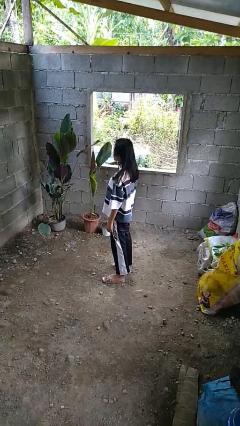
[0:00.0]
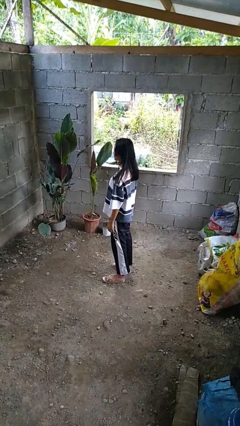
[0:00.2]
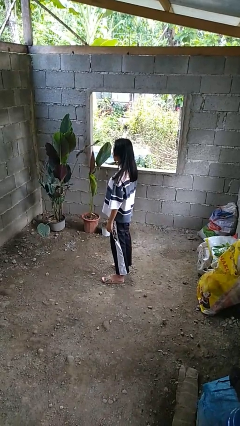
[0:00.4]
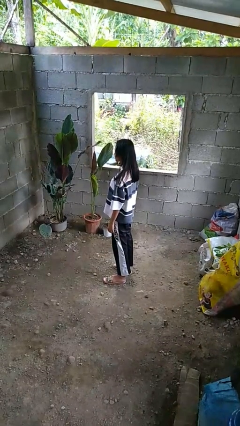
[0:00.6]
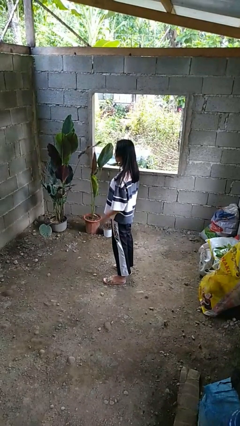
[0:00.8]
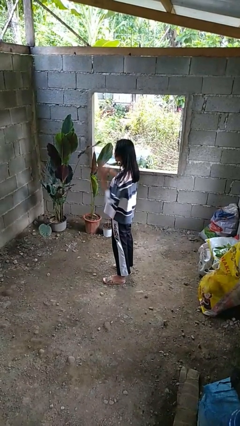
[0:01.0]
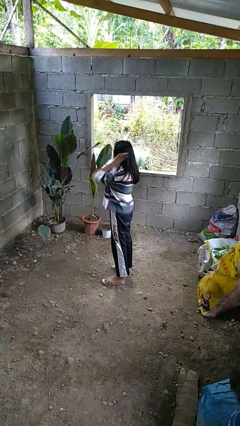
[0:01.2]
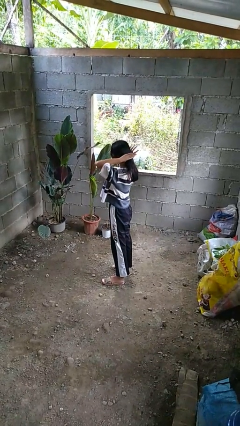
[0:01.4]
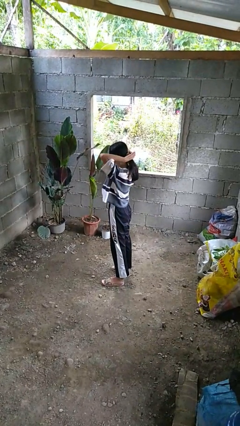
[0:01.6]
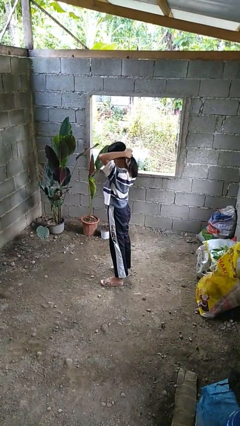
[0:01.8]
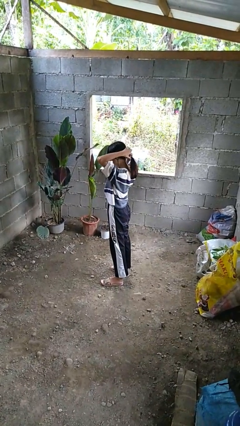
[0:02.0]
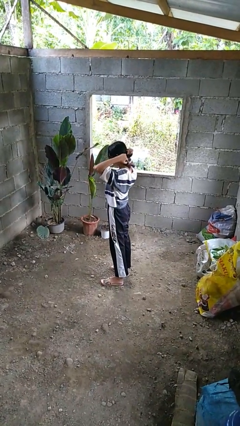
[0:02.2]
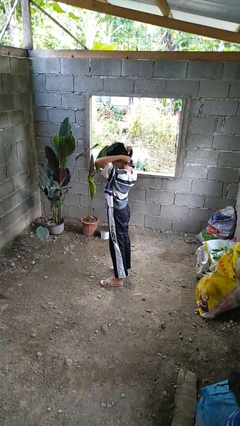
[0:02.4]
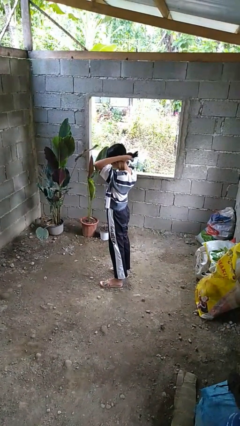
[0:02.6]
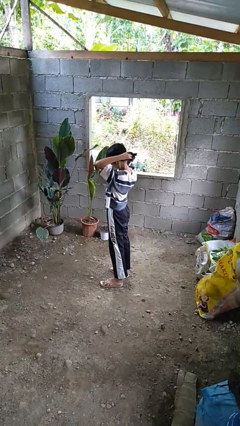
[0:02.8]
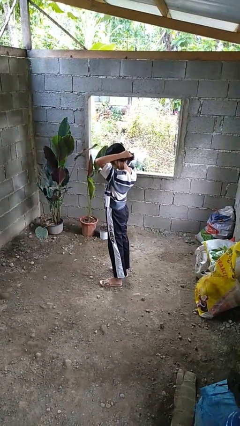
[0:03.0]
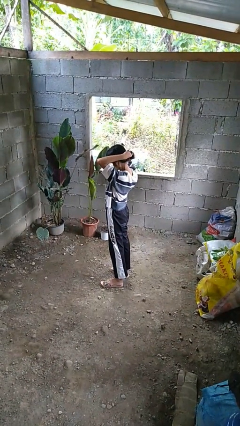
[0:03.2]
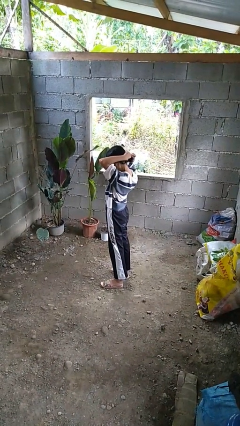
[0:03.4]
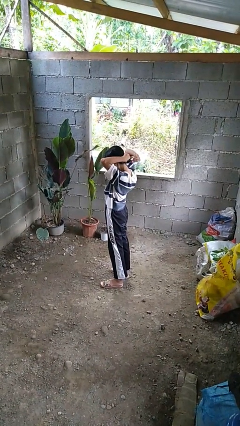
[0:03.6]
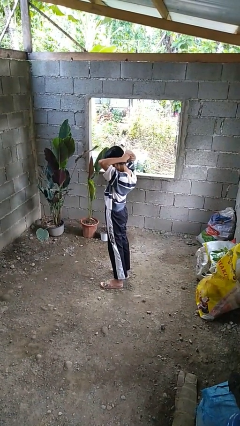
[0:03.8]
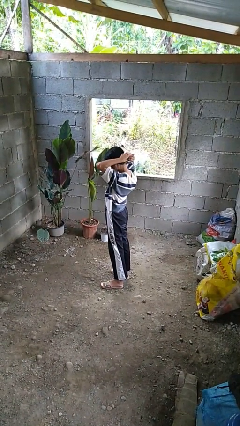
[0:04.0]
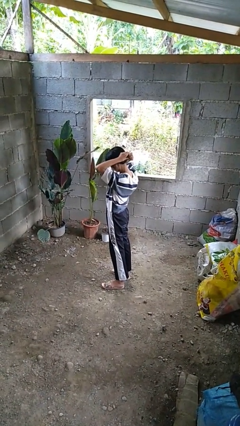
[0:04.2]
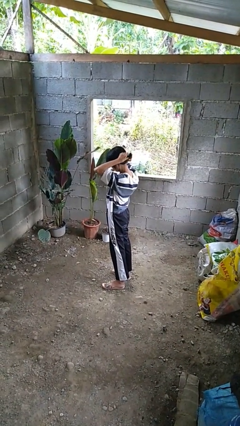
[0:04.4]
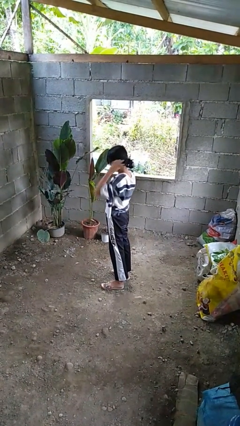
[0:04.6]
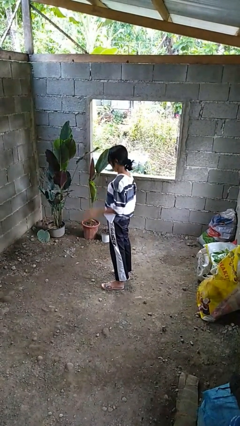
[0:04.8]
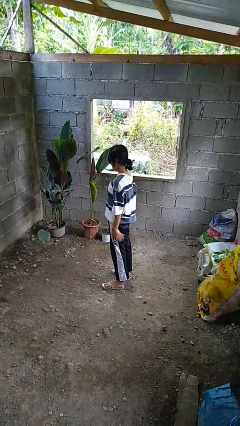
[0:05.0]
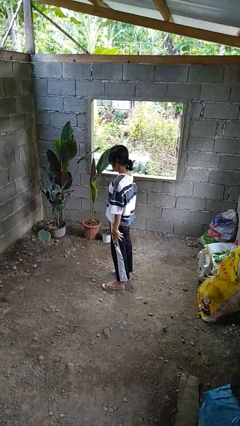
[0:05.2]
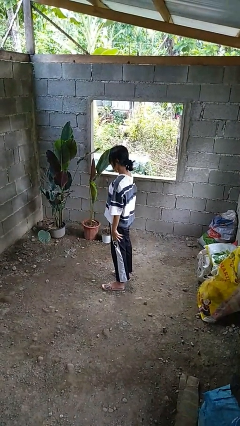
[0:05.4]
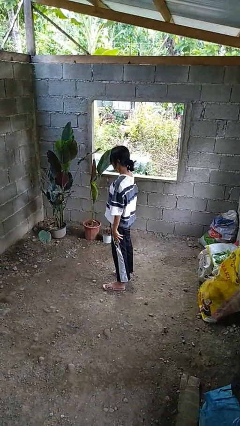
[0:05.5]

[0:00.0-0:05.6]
person puts hair in ponytail

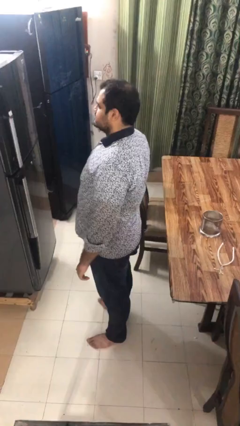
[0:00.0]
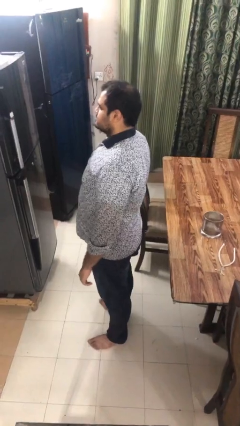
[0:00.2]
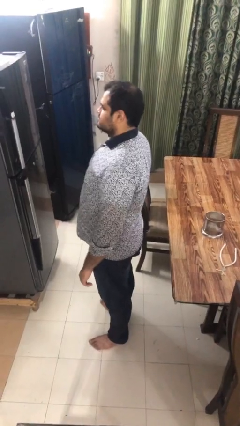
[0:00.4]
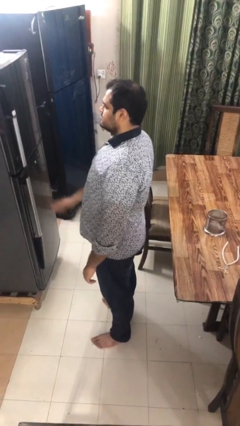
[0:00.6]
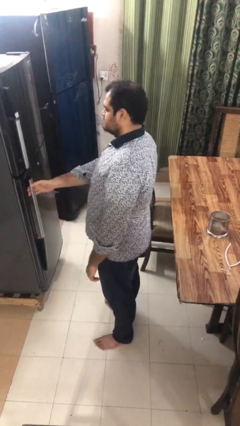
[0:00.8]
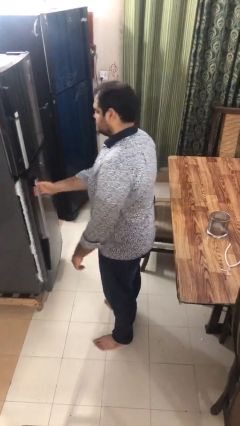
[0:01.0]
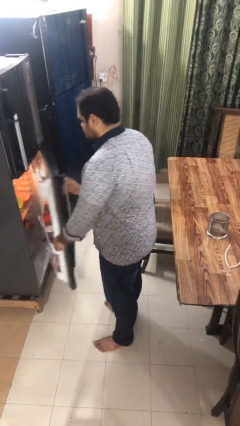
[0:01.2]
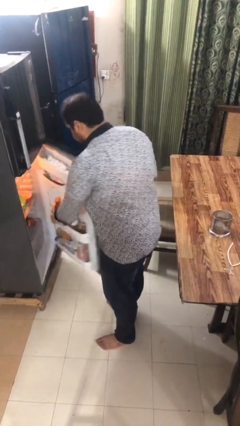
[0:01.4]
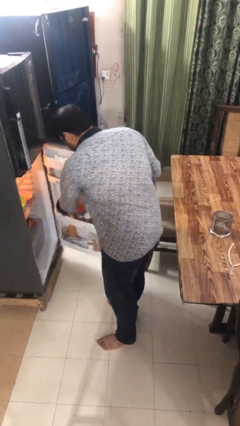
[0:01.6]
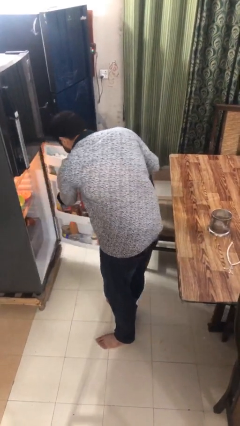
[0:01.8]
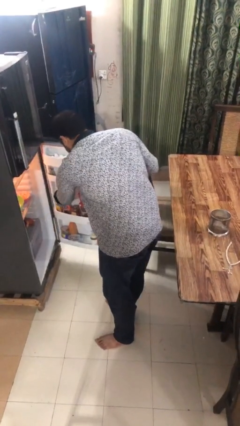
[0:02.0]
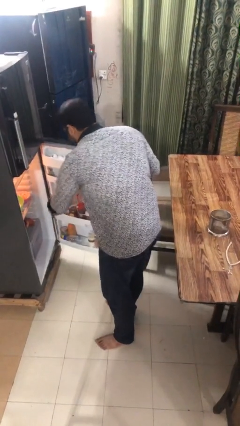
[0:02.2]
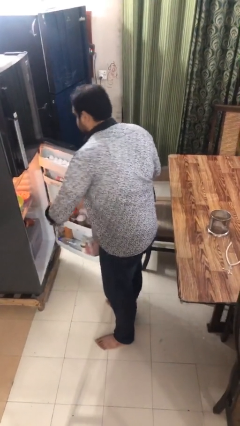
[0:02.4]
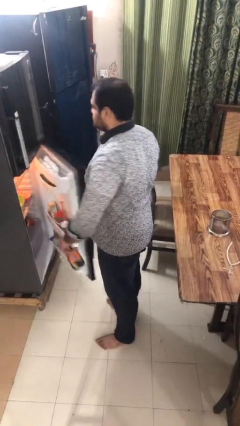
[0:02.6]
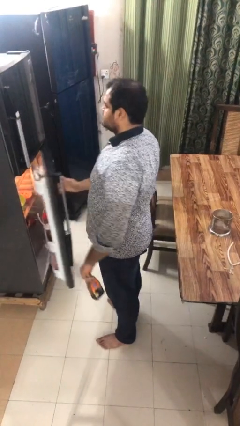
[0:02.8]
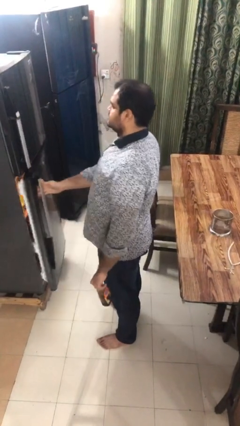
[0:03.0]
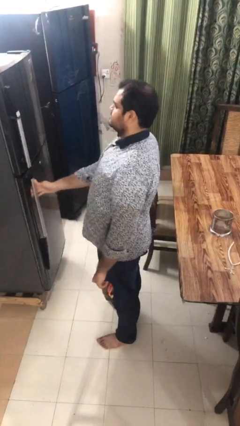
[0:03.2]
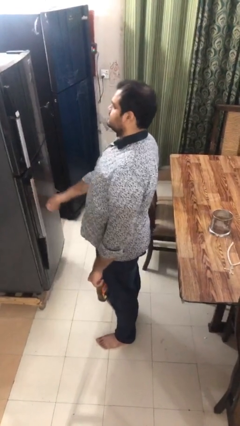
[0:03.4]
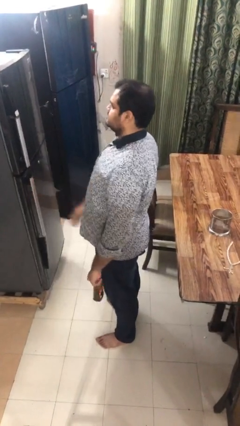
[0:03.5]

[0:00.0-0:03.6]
person takes object from refrigerator

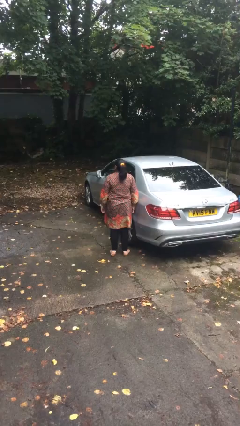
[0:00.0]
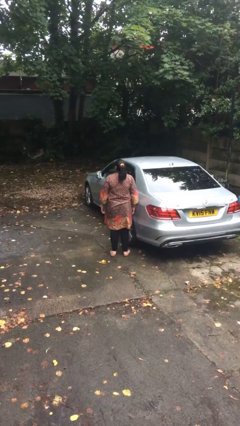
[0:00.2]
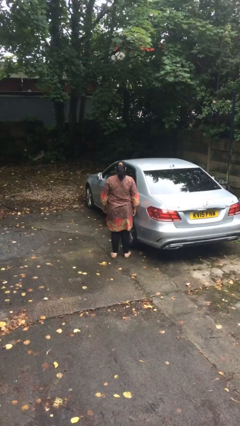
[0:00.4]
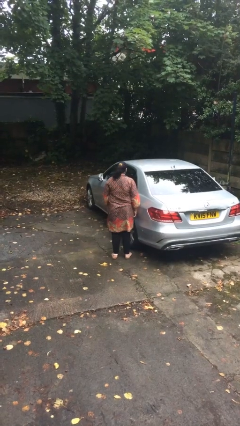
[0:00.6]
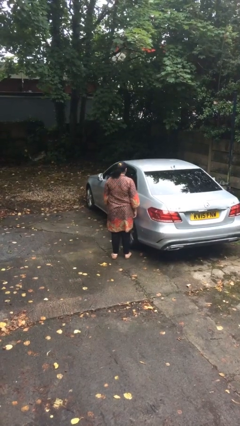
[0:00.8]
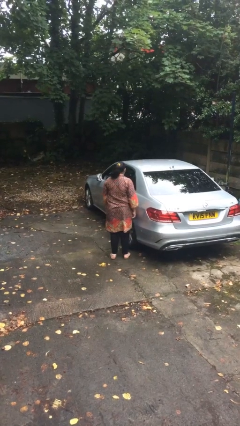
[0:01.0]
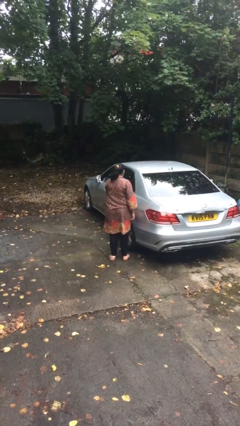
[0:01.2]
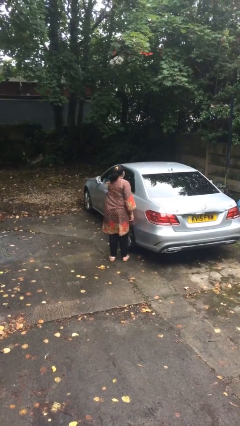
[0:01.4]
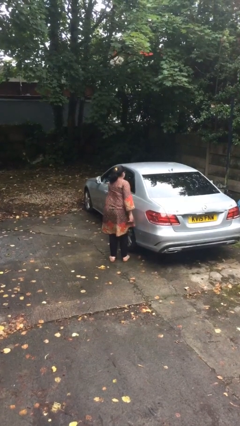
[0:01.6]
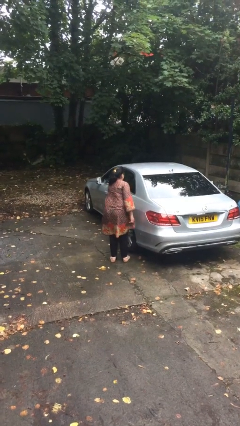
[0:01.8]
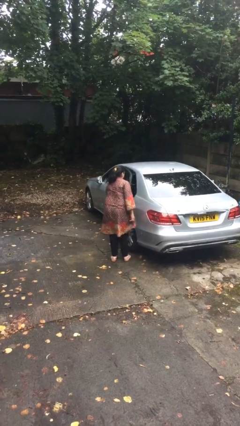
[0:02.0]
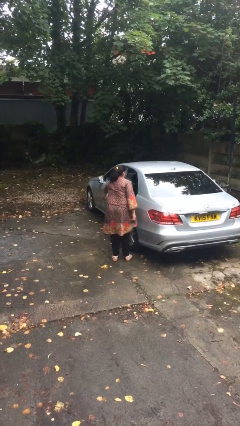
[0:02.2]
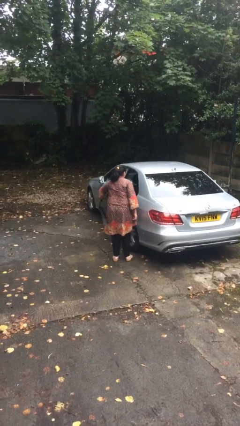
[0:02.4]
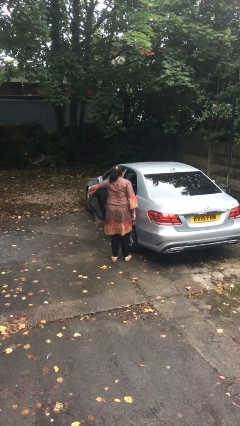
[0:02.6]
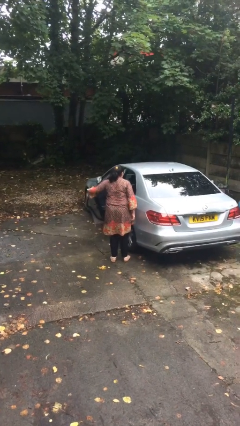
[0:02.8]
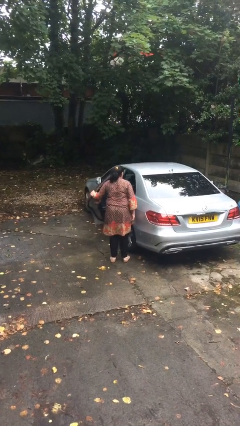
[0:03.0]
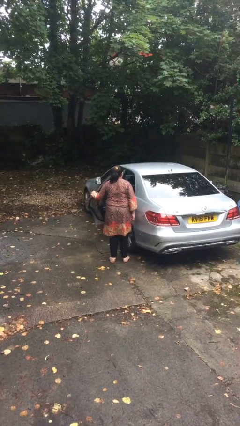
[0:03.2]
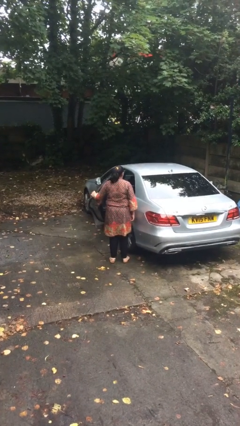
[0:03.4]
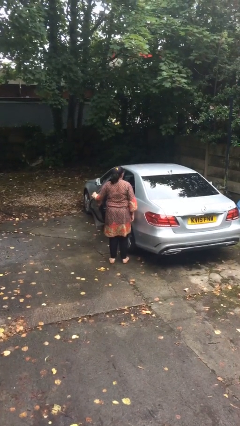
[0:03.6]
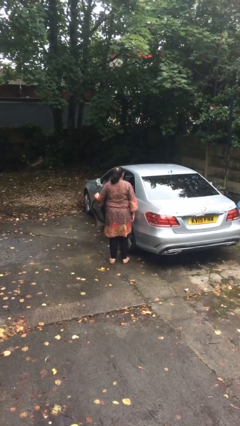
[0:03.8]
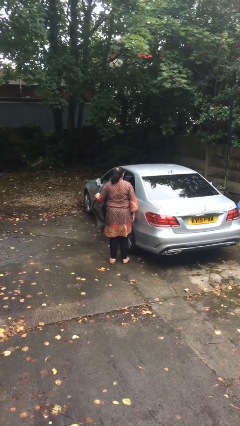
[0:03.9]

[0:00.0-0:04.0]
person opens car door

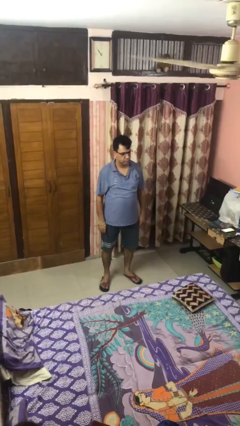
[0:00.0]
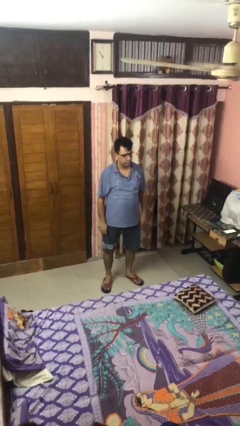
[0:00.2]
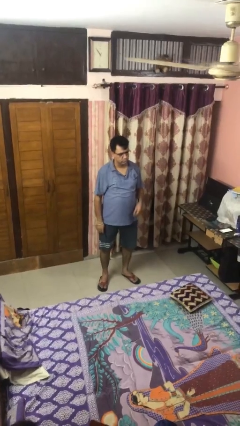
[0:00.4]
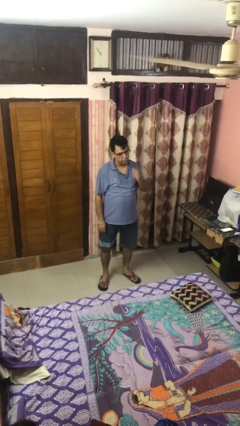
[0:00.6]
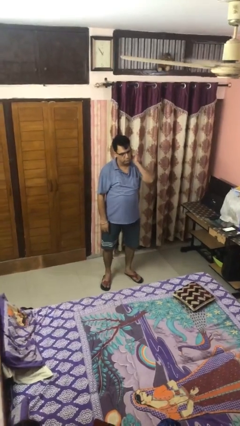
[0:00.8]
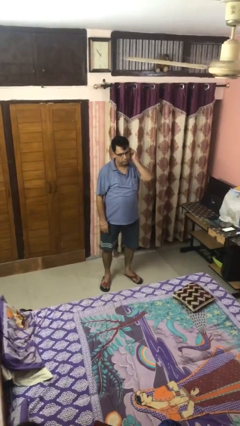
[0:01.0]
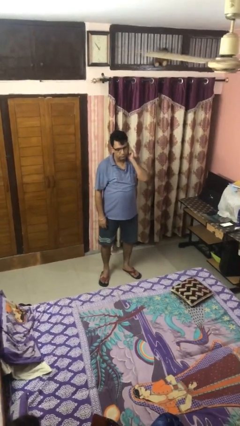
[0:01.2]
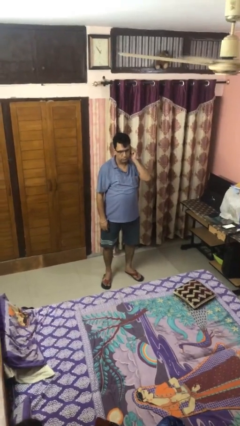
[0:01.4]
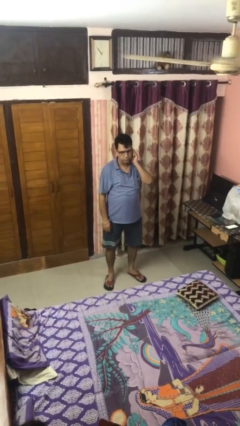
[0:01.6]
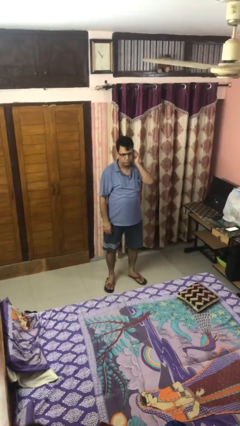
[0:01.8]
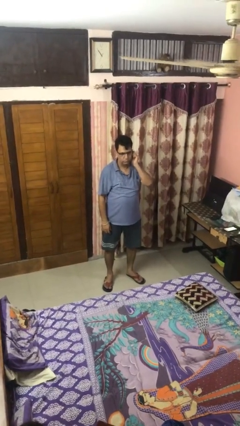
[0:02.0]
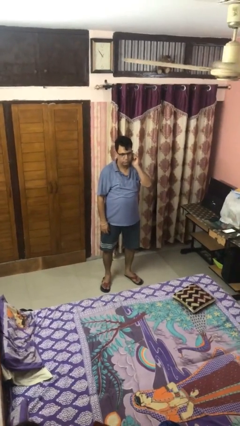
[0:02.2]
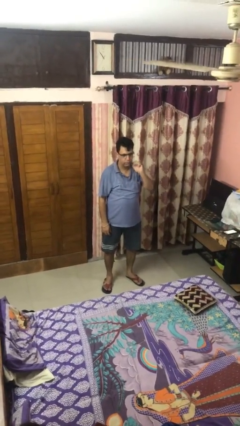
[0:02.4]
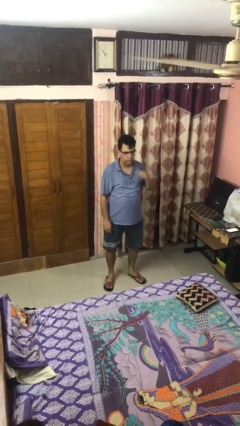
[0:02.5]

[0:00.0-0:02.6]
person touches earlobe

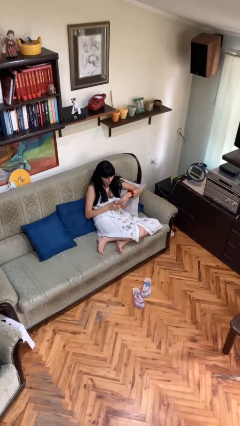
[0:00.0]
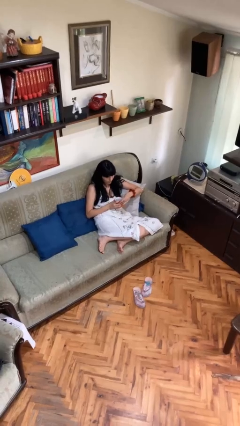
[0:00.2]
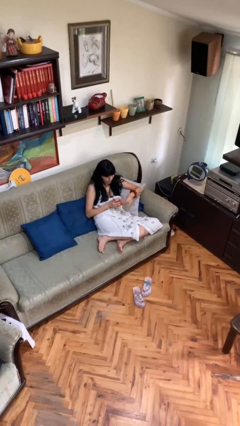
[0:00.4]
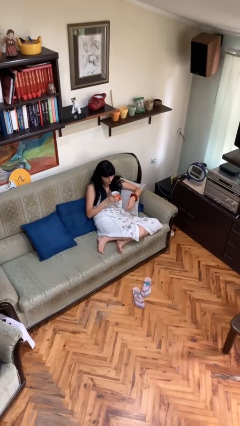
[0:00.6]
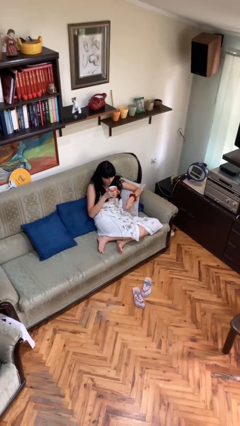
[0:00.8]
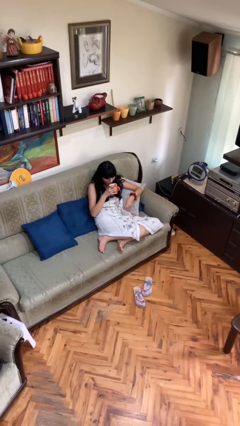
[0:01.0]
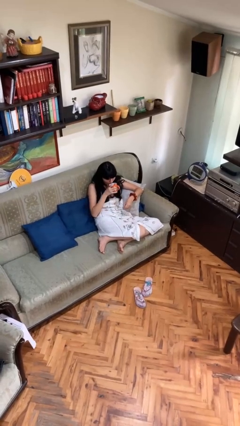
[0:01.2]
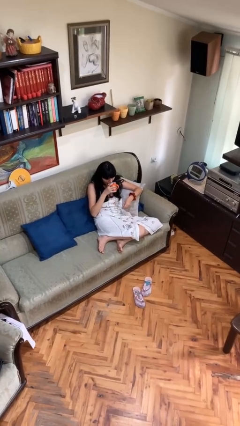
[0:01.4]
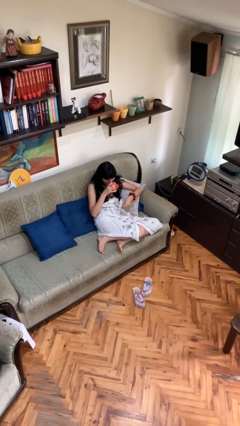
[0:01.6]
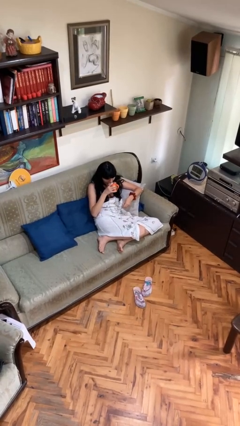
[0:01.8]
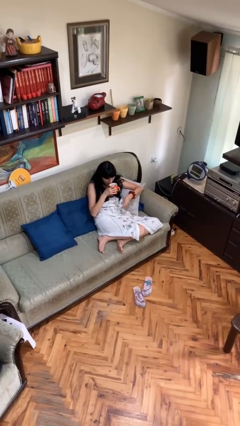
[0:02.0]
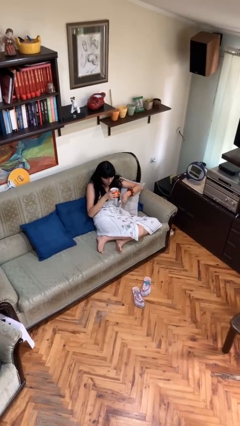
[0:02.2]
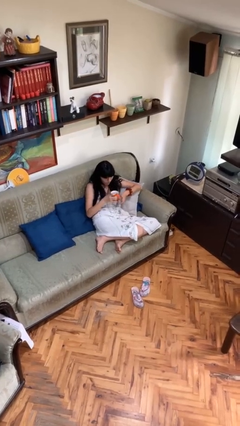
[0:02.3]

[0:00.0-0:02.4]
person drinks from mug
